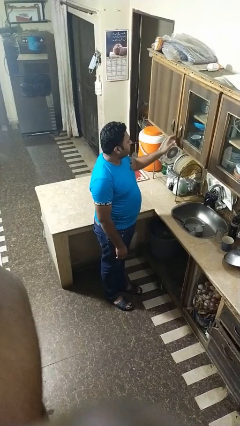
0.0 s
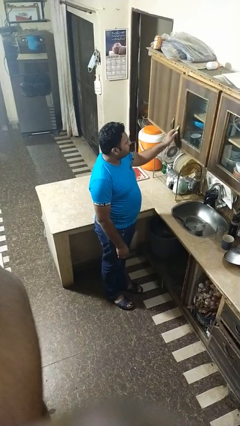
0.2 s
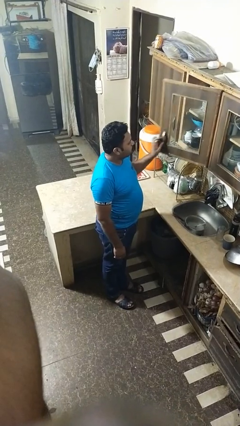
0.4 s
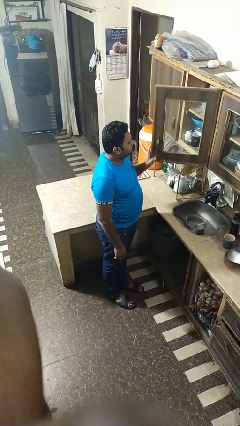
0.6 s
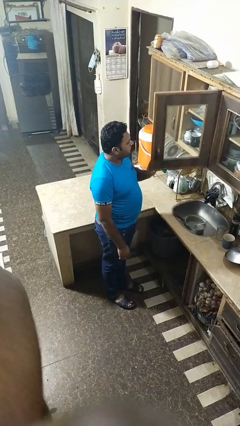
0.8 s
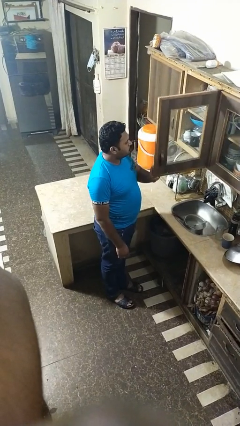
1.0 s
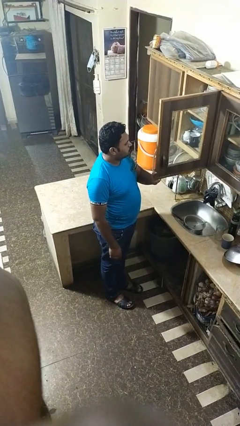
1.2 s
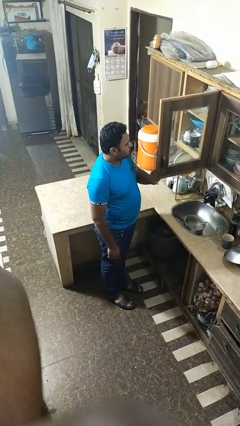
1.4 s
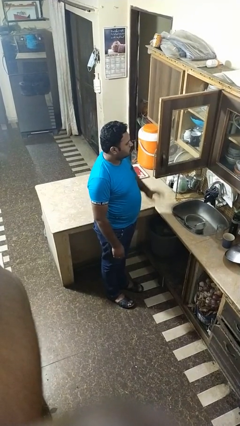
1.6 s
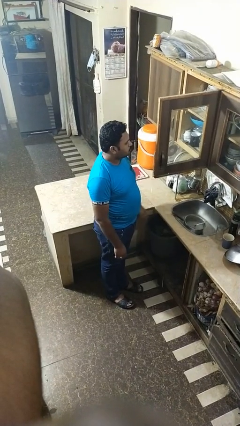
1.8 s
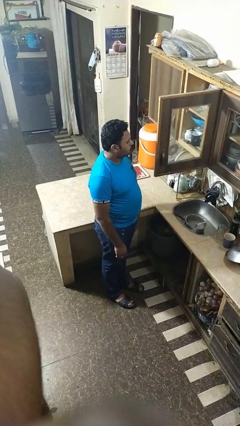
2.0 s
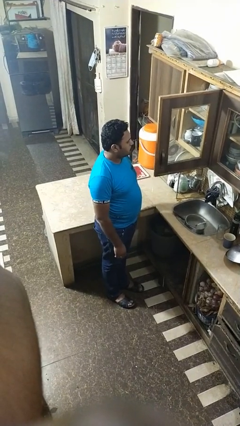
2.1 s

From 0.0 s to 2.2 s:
person opens cabinet

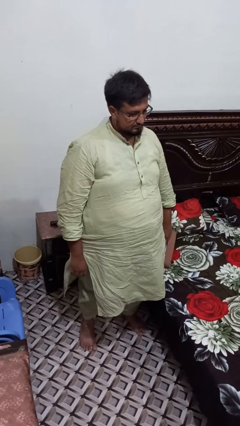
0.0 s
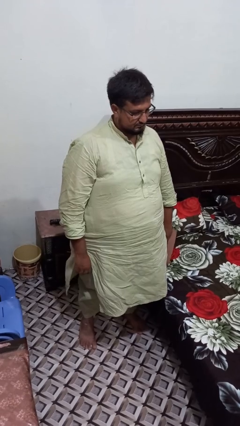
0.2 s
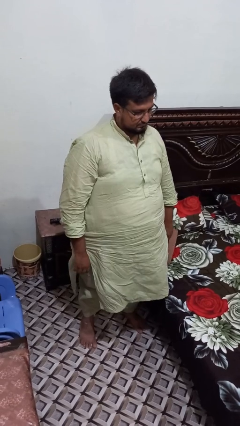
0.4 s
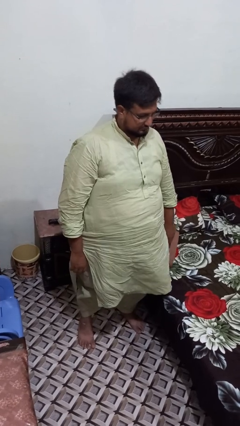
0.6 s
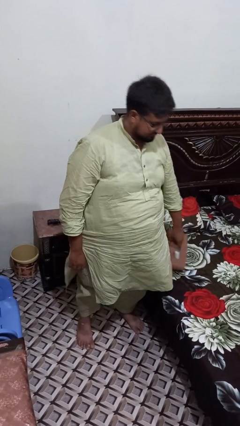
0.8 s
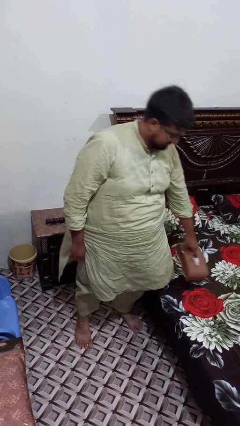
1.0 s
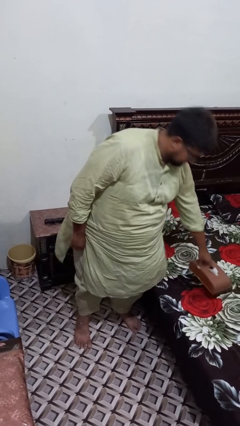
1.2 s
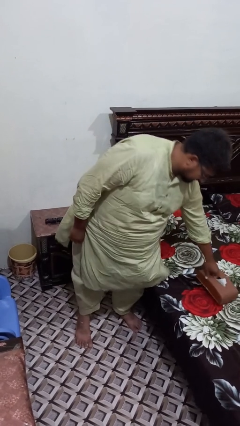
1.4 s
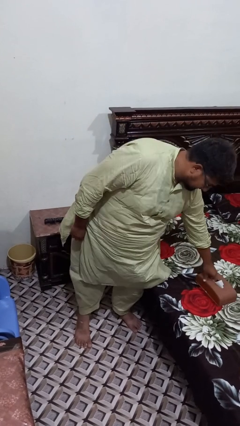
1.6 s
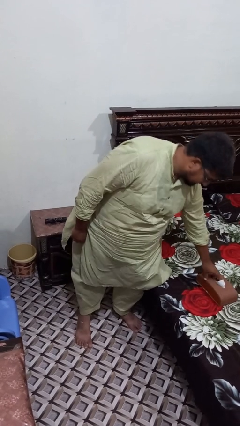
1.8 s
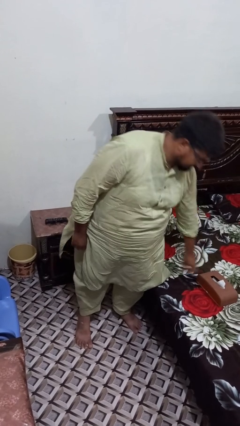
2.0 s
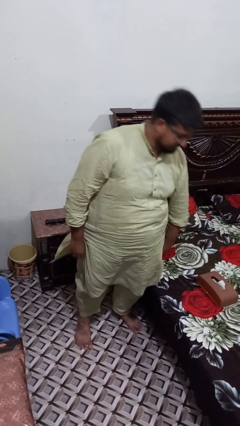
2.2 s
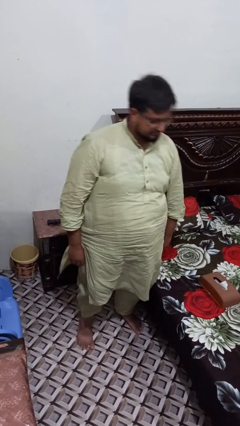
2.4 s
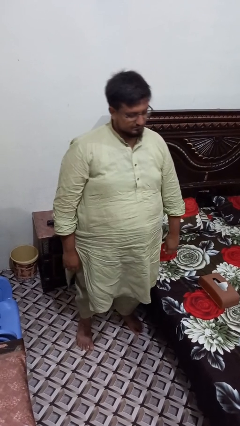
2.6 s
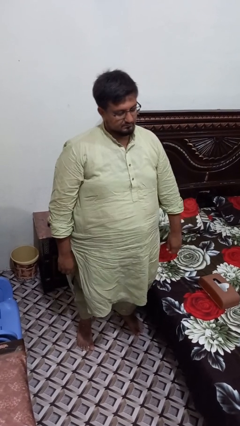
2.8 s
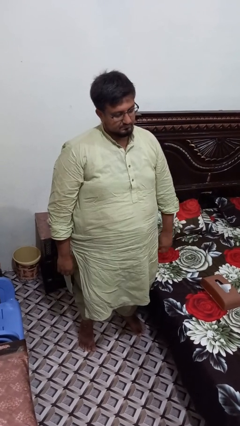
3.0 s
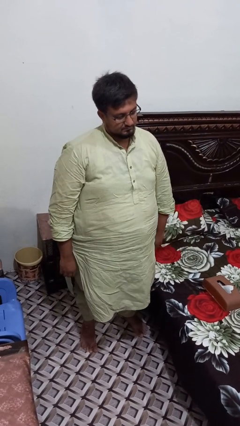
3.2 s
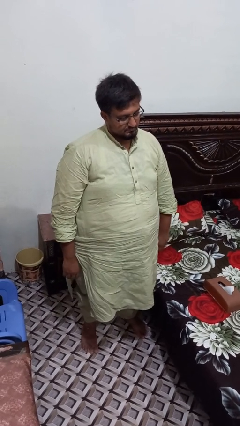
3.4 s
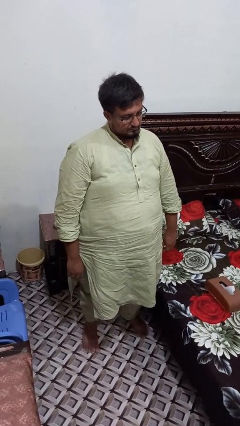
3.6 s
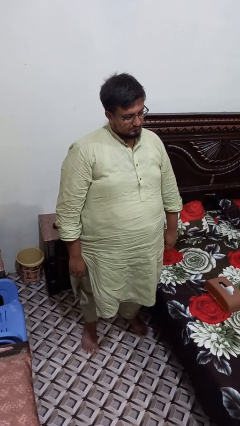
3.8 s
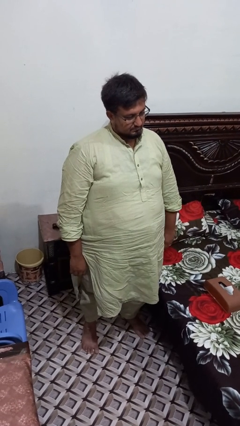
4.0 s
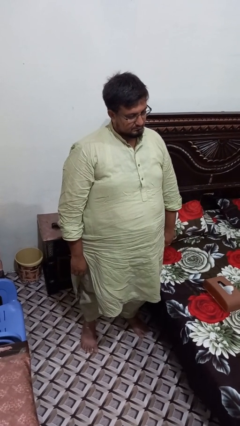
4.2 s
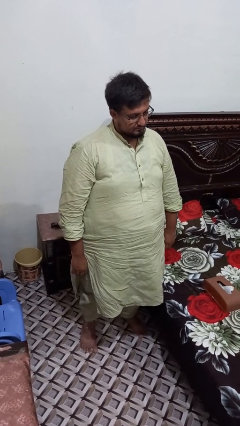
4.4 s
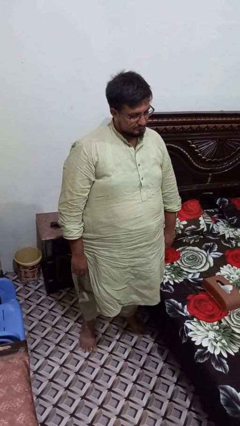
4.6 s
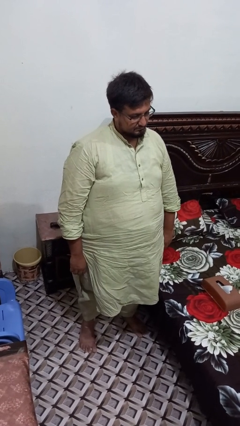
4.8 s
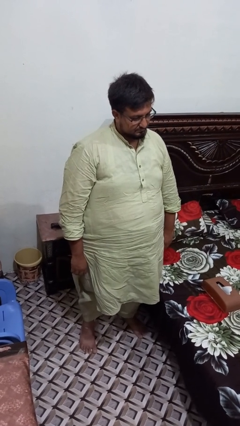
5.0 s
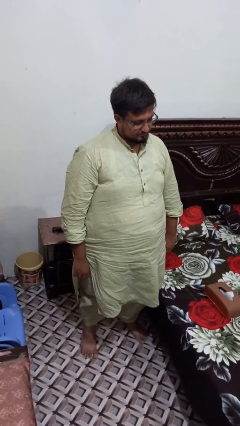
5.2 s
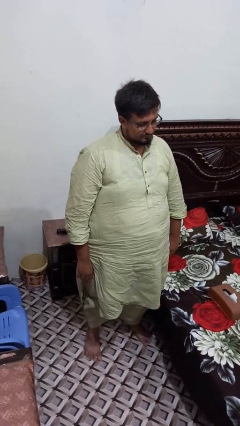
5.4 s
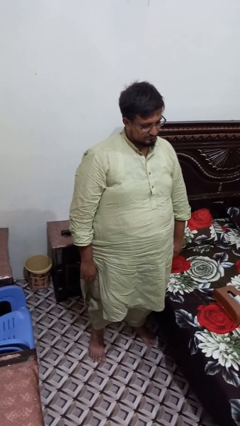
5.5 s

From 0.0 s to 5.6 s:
person puts down object on bed

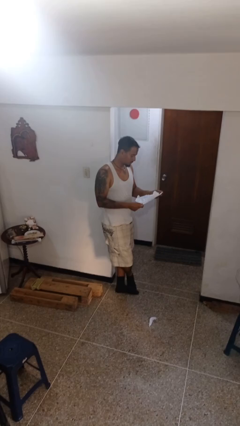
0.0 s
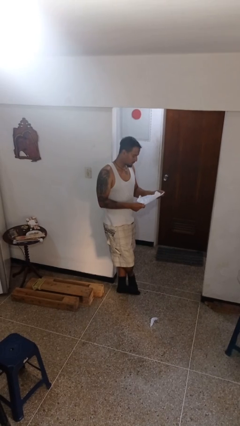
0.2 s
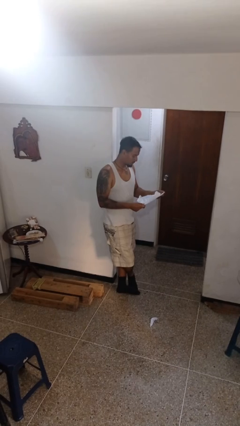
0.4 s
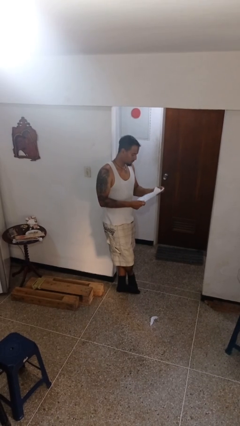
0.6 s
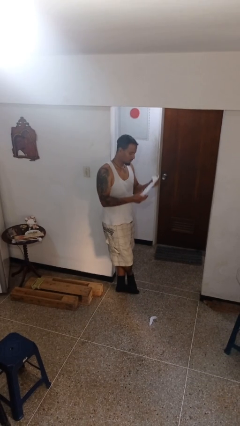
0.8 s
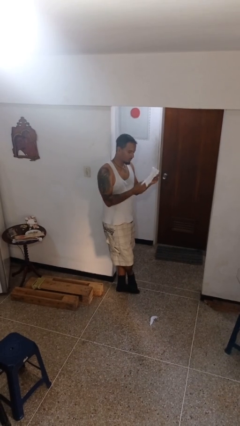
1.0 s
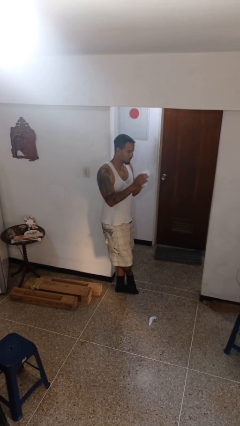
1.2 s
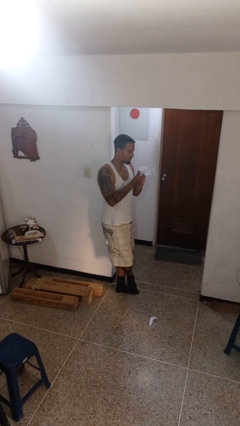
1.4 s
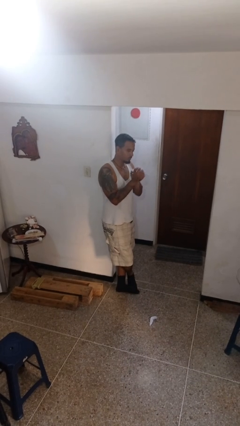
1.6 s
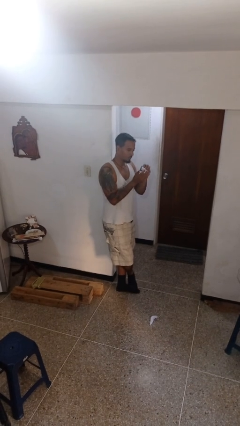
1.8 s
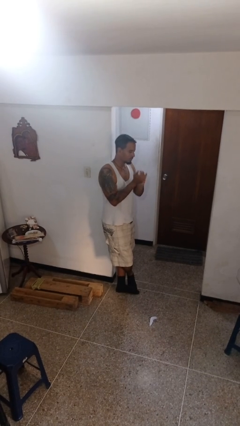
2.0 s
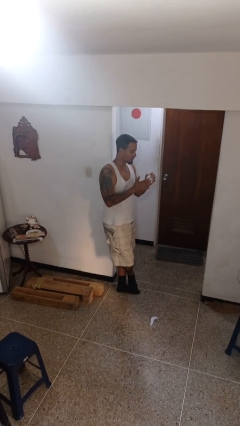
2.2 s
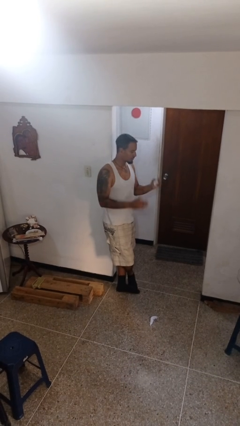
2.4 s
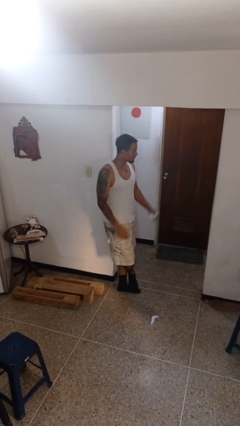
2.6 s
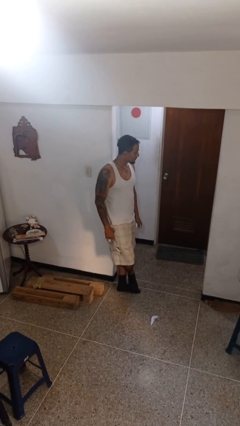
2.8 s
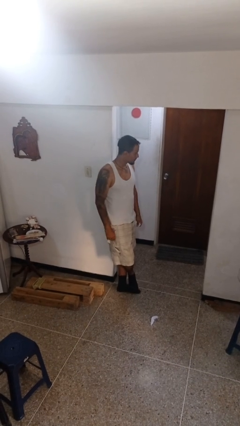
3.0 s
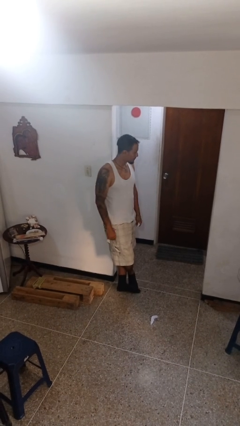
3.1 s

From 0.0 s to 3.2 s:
person crumples paper

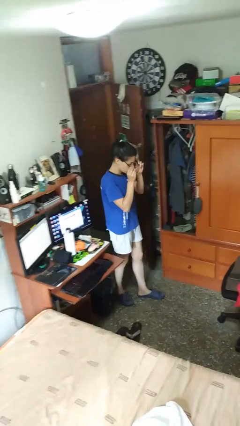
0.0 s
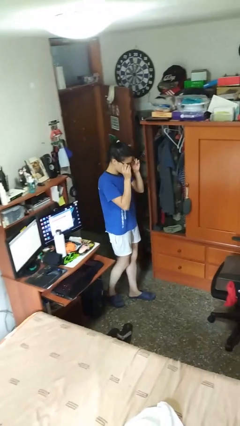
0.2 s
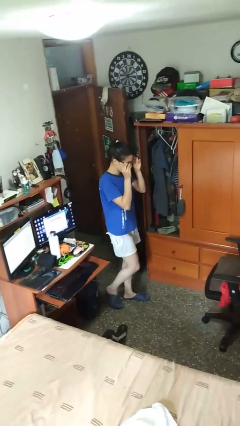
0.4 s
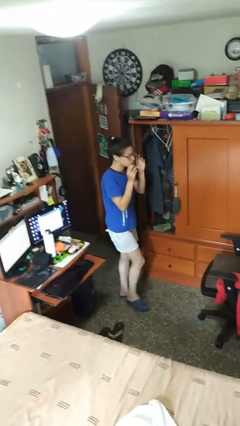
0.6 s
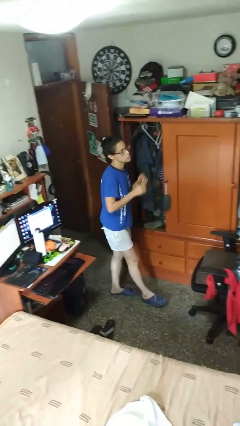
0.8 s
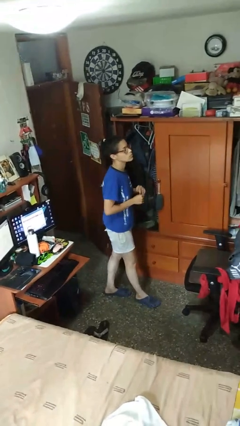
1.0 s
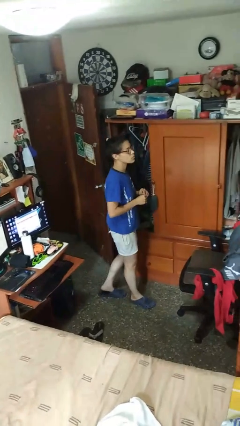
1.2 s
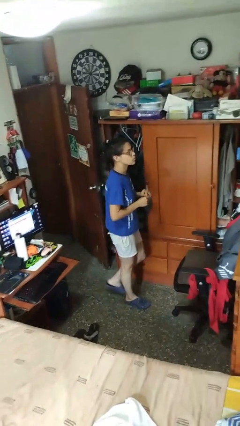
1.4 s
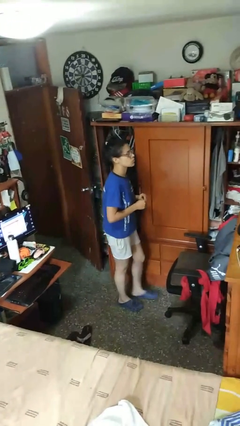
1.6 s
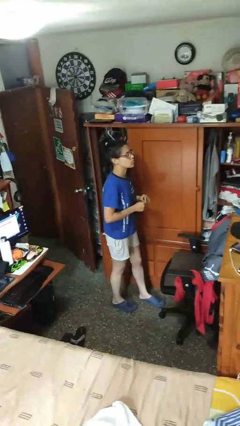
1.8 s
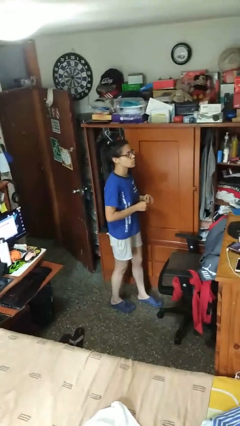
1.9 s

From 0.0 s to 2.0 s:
person puts on glasses

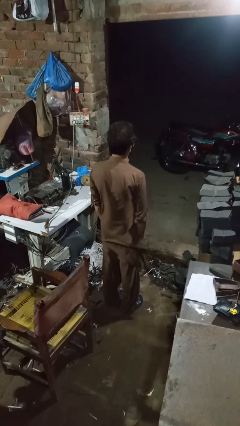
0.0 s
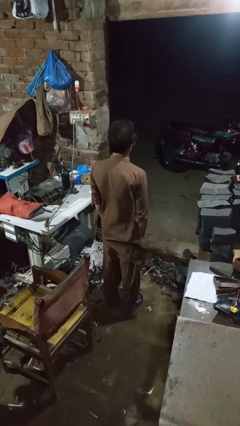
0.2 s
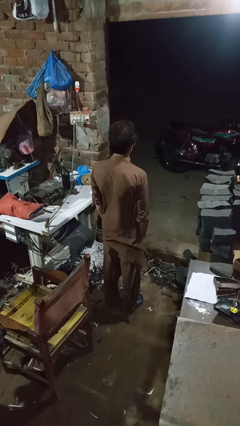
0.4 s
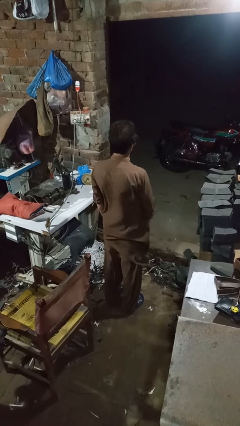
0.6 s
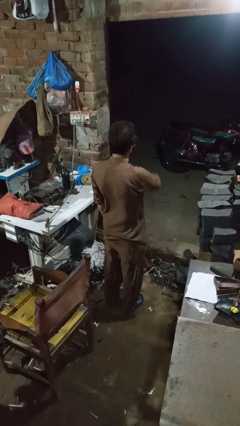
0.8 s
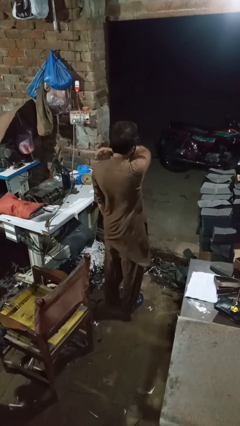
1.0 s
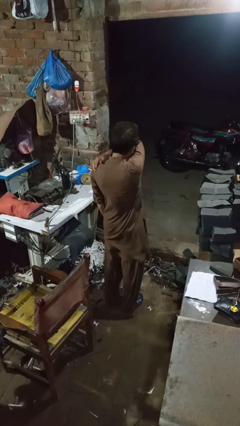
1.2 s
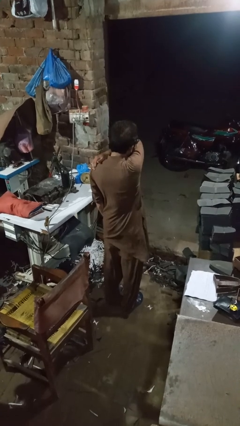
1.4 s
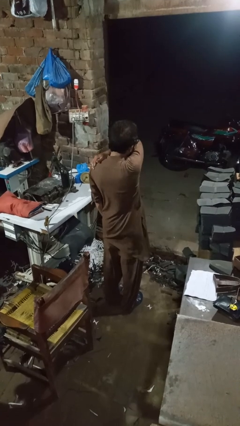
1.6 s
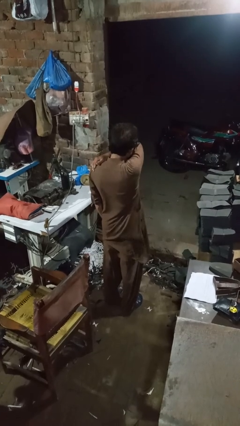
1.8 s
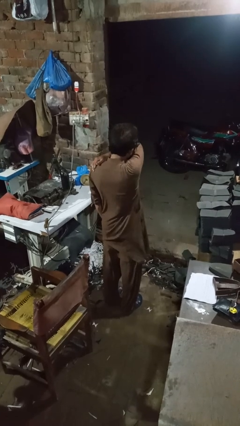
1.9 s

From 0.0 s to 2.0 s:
person sneezes into arm

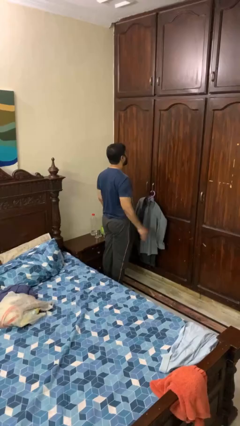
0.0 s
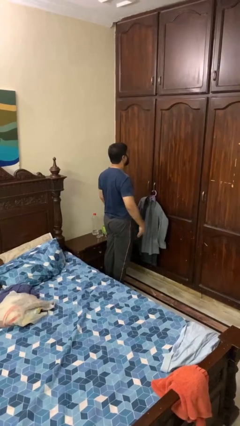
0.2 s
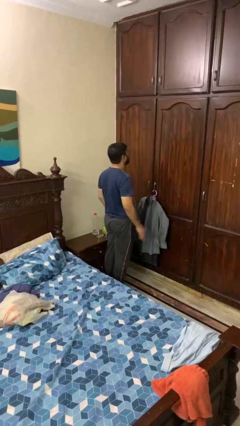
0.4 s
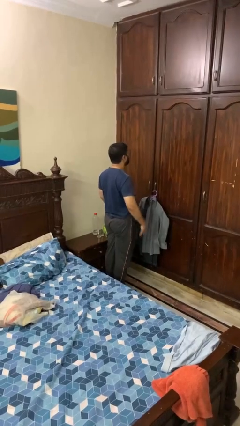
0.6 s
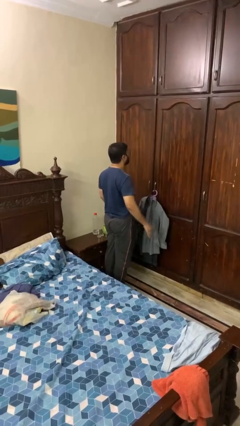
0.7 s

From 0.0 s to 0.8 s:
person slaps hands on thighs

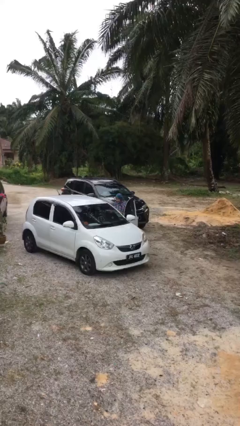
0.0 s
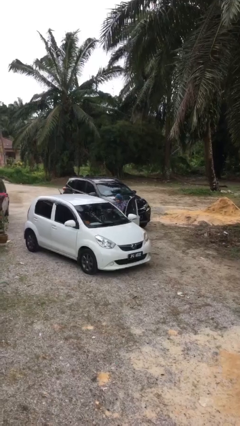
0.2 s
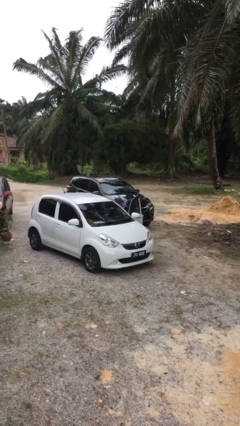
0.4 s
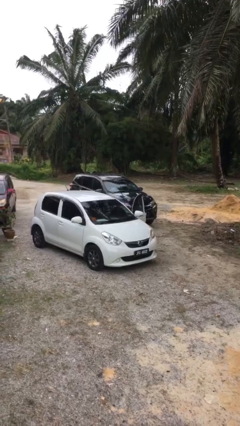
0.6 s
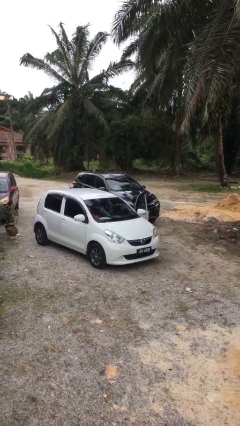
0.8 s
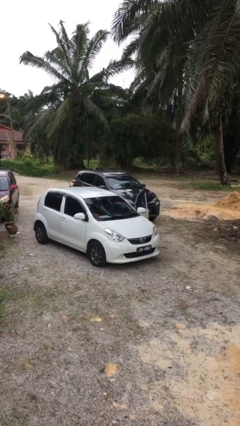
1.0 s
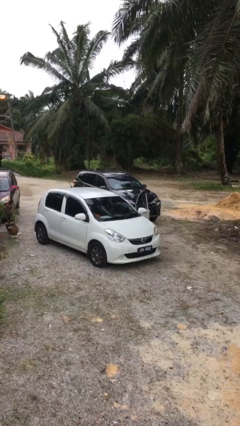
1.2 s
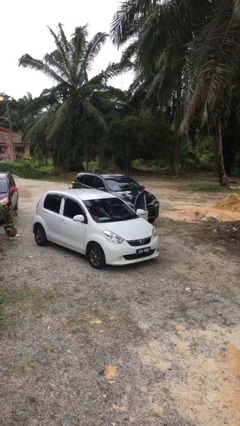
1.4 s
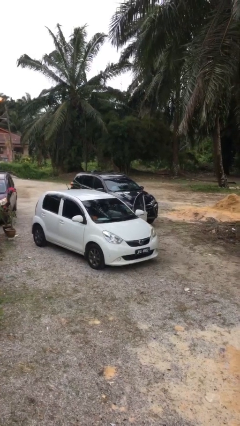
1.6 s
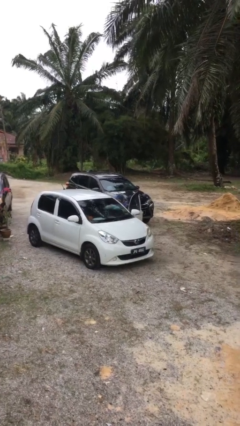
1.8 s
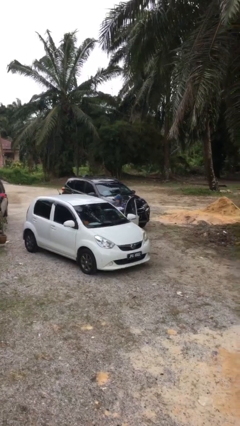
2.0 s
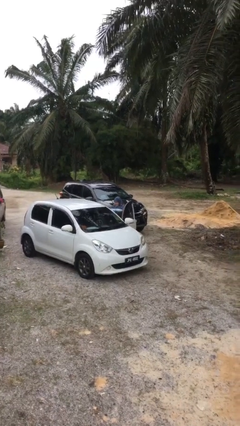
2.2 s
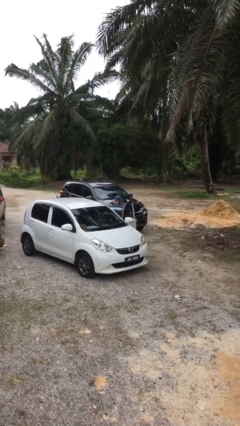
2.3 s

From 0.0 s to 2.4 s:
person unloads car
